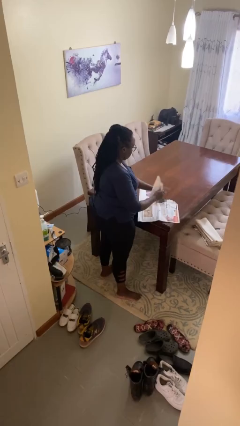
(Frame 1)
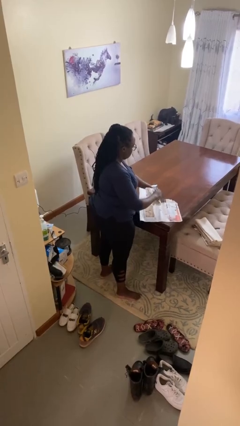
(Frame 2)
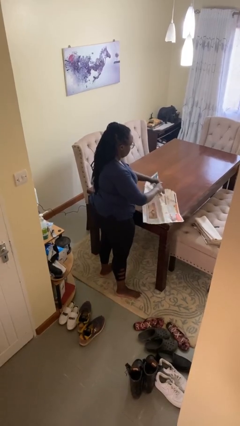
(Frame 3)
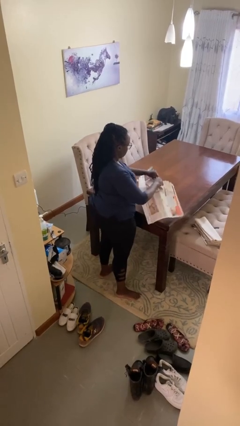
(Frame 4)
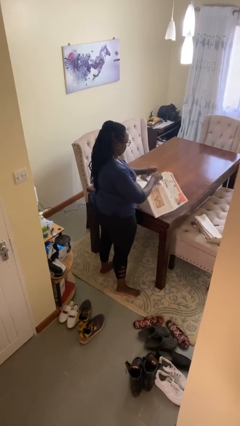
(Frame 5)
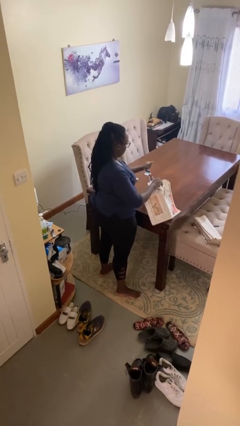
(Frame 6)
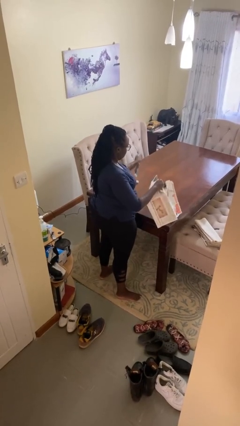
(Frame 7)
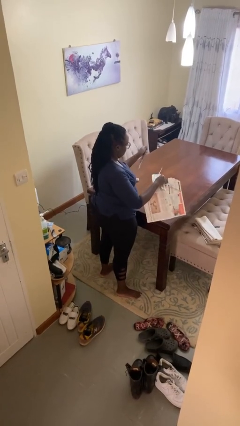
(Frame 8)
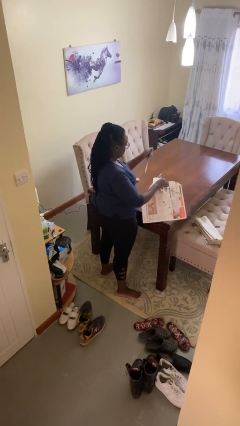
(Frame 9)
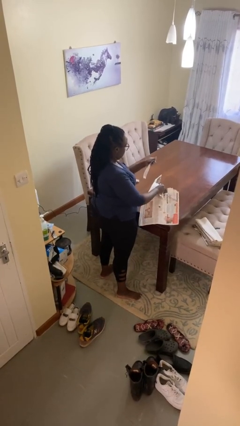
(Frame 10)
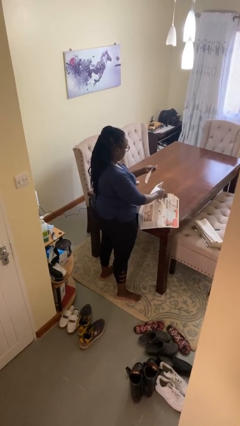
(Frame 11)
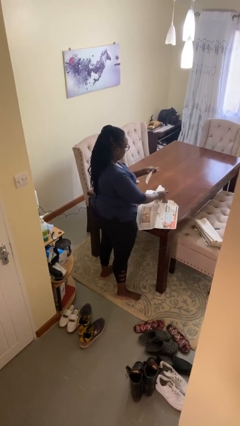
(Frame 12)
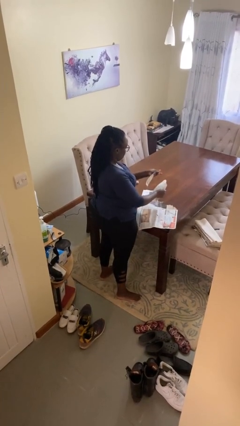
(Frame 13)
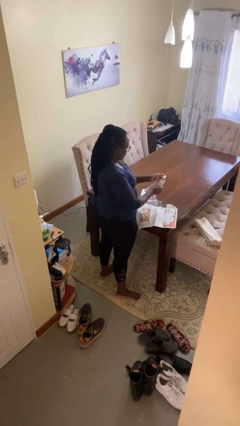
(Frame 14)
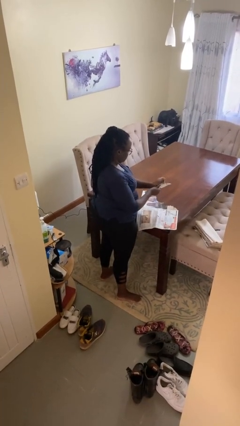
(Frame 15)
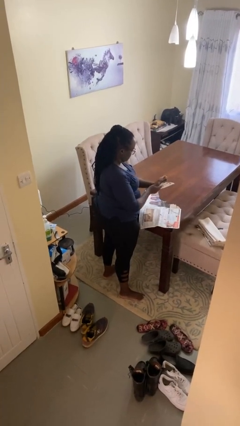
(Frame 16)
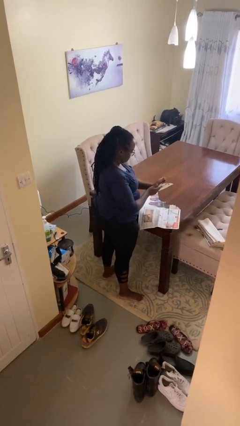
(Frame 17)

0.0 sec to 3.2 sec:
person tears paper

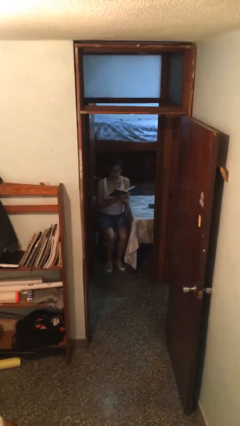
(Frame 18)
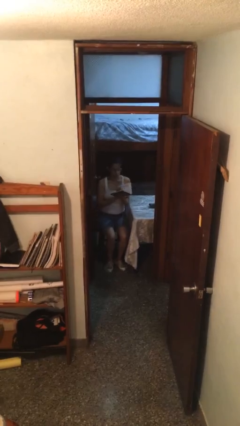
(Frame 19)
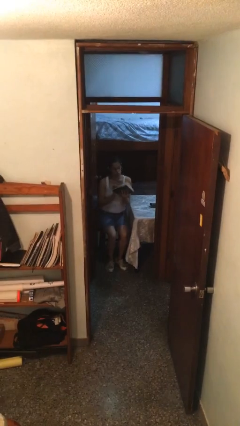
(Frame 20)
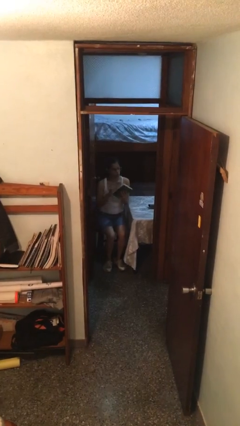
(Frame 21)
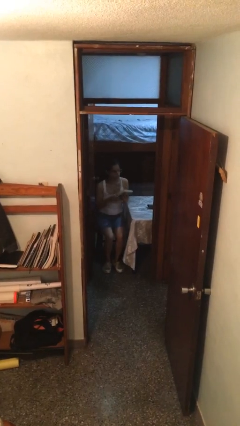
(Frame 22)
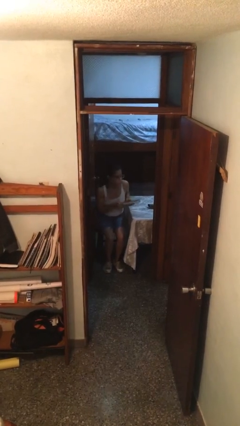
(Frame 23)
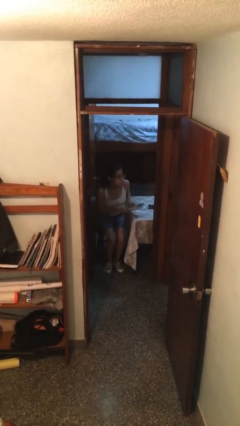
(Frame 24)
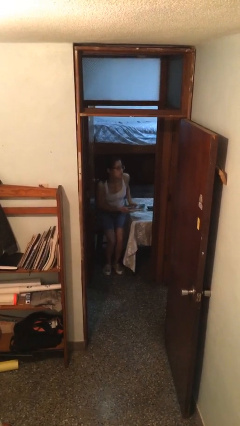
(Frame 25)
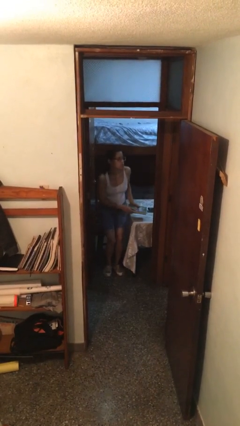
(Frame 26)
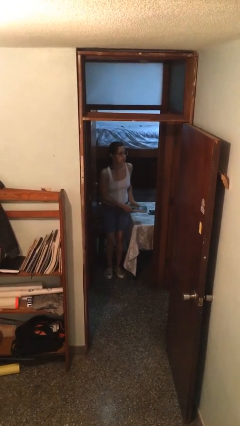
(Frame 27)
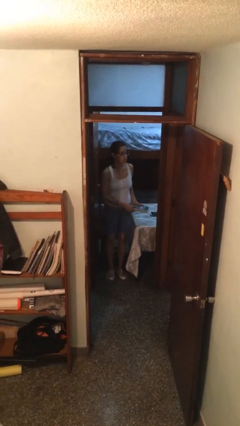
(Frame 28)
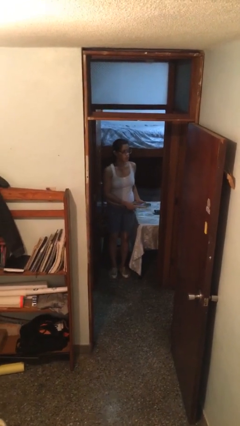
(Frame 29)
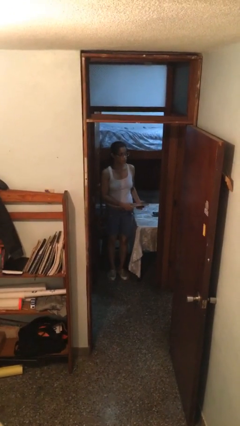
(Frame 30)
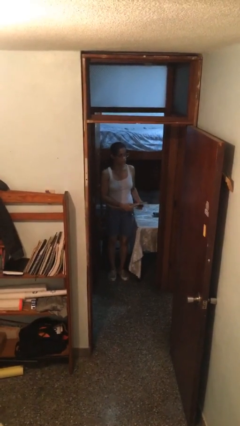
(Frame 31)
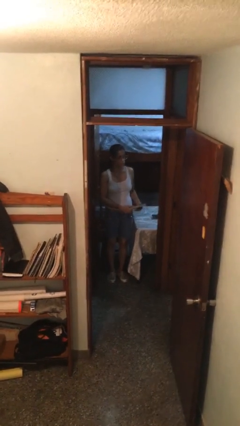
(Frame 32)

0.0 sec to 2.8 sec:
person stands up

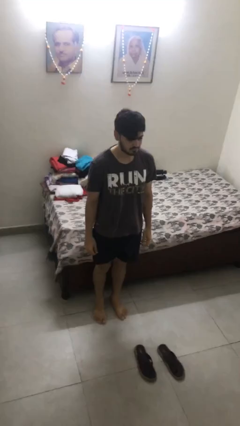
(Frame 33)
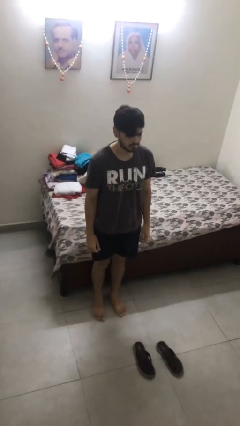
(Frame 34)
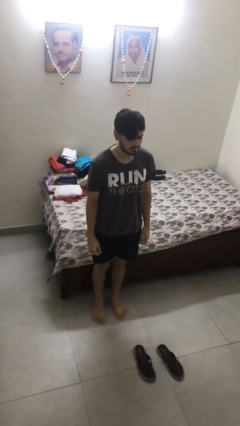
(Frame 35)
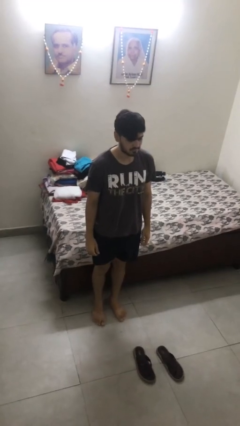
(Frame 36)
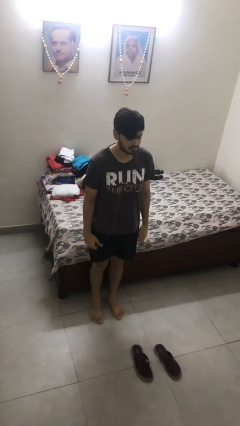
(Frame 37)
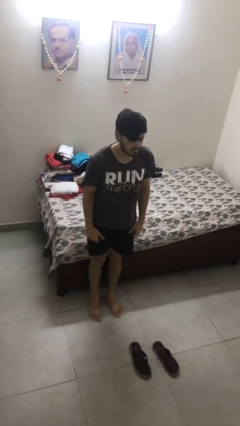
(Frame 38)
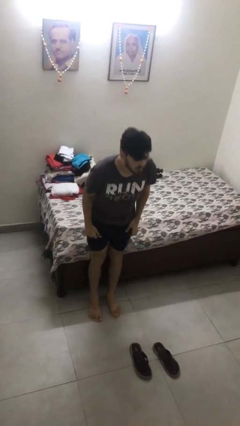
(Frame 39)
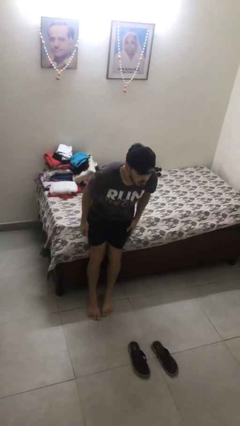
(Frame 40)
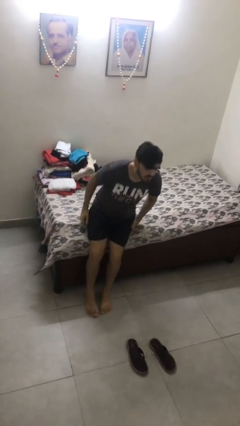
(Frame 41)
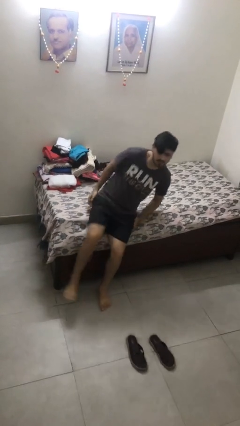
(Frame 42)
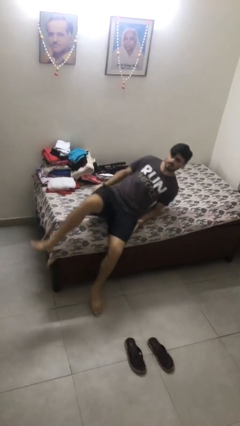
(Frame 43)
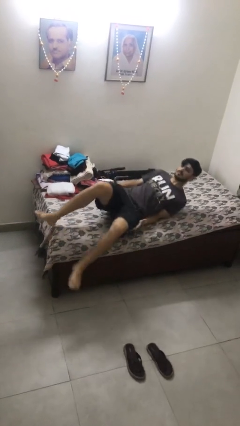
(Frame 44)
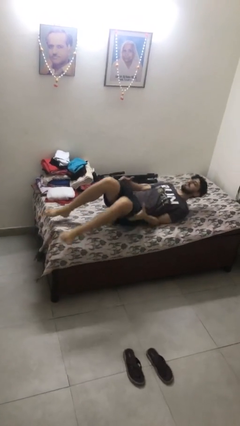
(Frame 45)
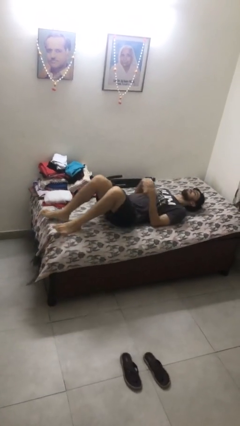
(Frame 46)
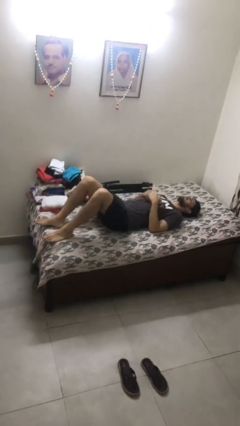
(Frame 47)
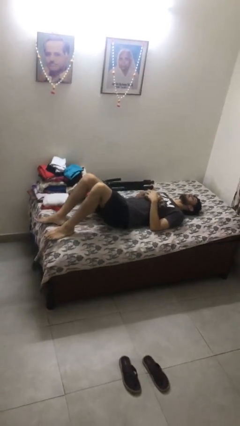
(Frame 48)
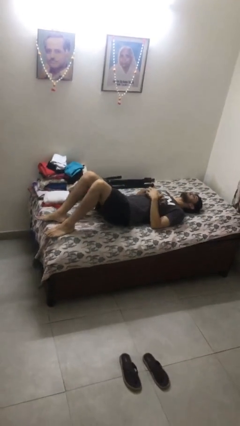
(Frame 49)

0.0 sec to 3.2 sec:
person lies down on bed

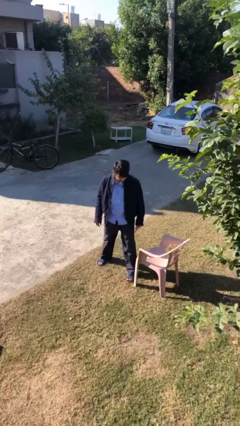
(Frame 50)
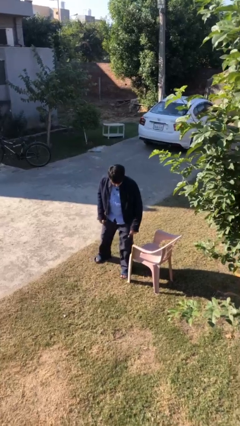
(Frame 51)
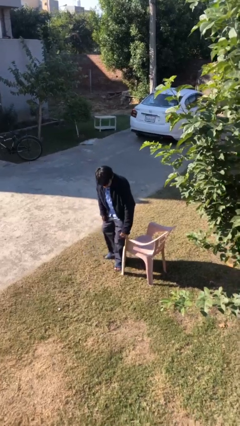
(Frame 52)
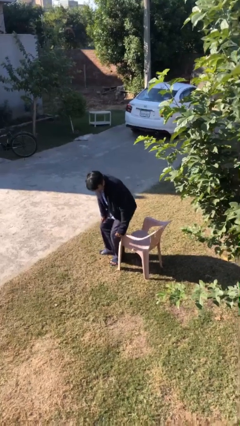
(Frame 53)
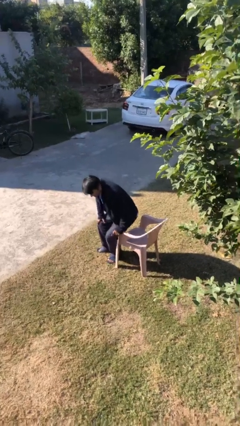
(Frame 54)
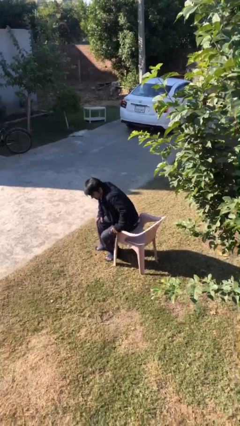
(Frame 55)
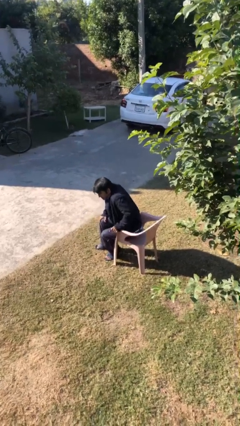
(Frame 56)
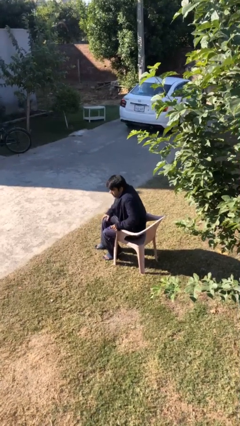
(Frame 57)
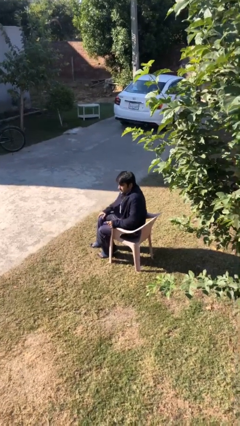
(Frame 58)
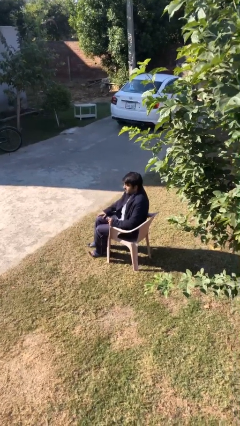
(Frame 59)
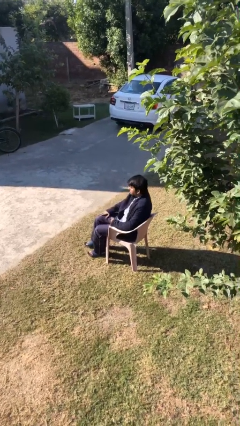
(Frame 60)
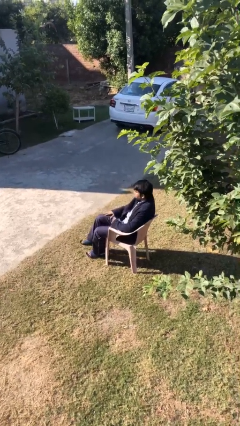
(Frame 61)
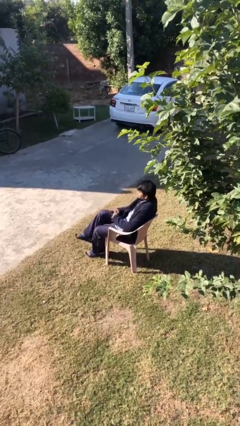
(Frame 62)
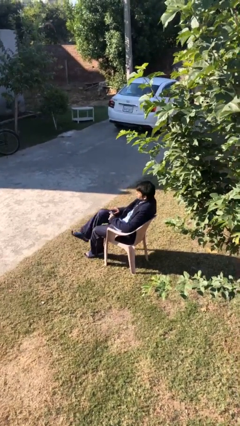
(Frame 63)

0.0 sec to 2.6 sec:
person sits down

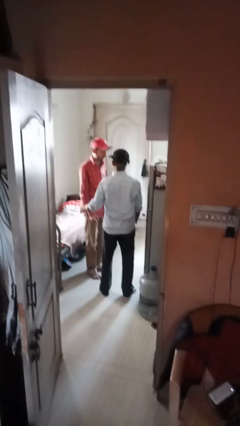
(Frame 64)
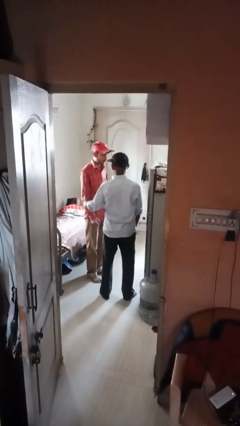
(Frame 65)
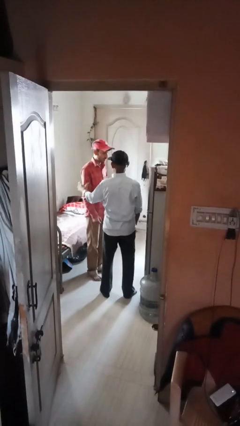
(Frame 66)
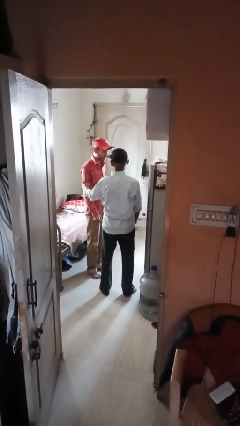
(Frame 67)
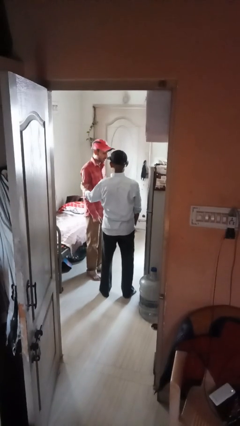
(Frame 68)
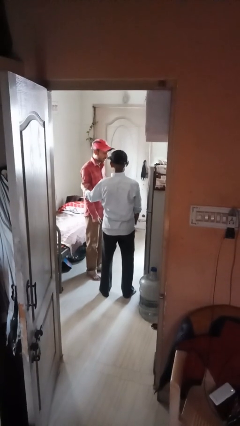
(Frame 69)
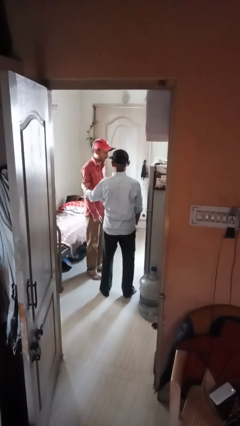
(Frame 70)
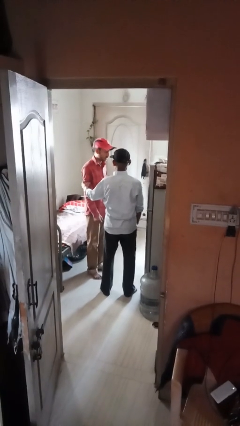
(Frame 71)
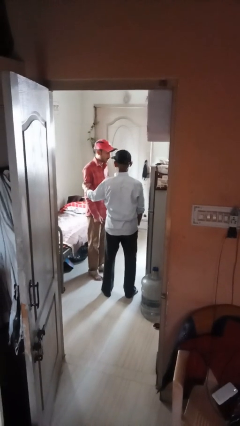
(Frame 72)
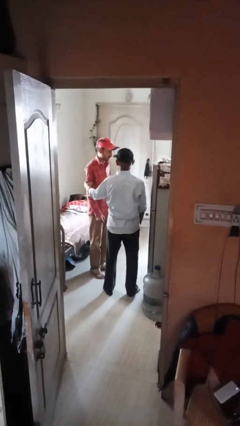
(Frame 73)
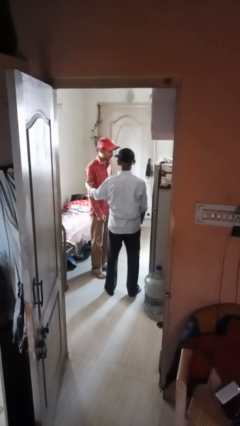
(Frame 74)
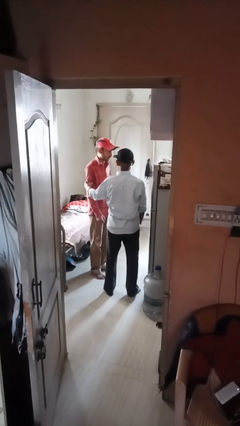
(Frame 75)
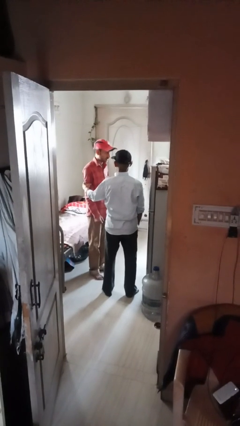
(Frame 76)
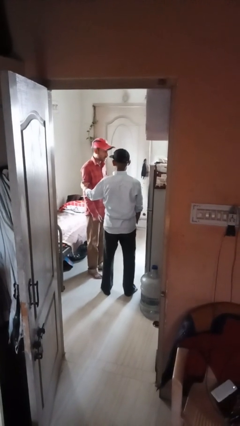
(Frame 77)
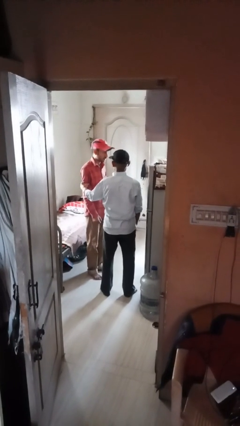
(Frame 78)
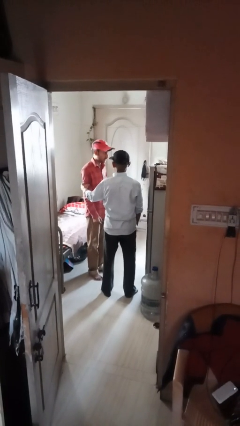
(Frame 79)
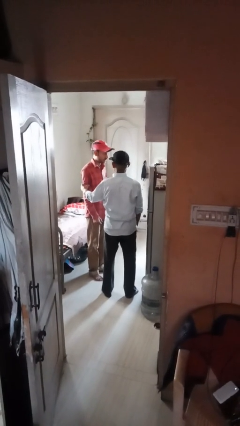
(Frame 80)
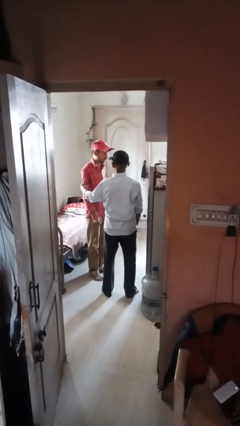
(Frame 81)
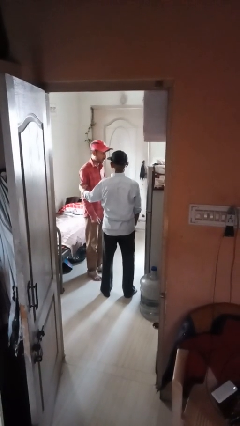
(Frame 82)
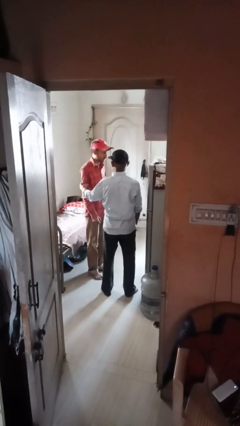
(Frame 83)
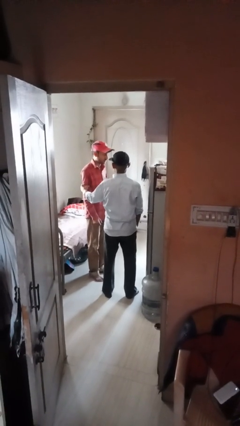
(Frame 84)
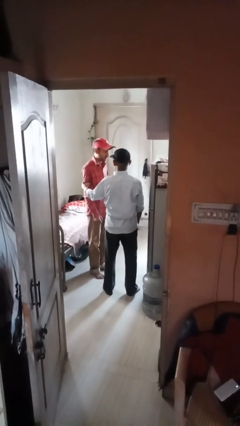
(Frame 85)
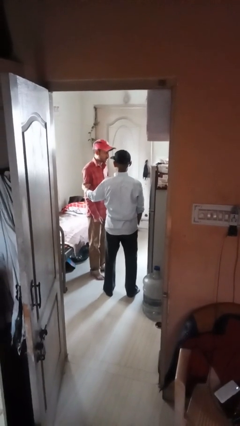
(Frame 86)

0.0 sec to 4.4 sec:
person spins person around

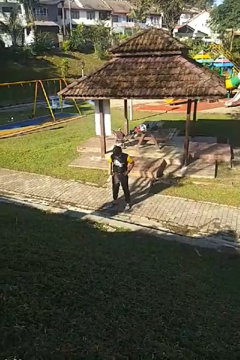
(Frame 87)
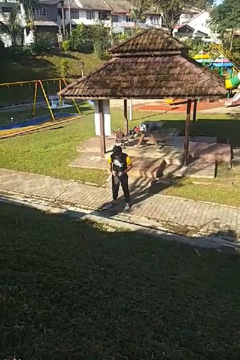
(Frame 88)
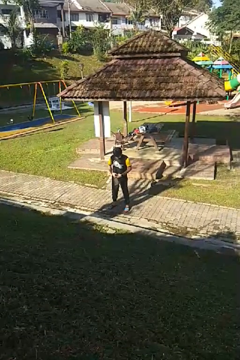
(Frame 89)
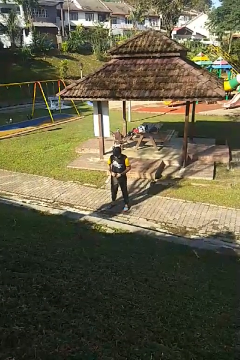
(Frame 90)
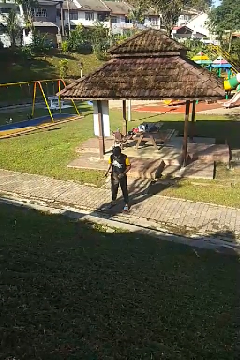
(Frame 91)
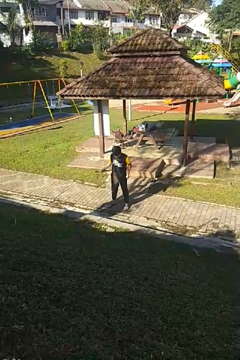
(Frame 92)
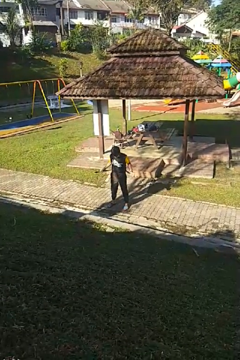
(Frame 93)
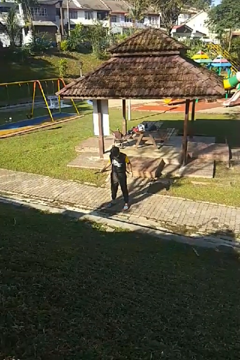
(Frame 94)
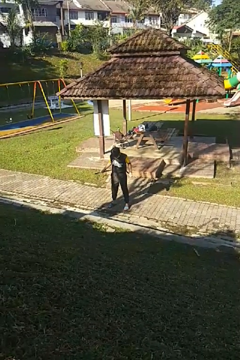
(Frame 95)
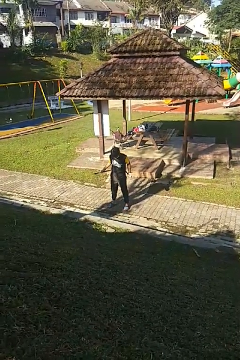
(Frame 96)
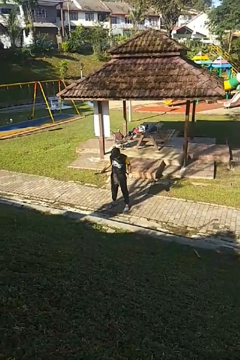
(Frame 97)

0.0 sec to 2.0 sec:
person takes off belt
